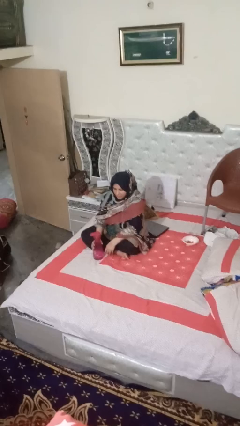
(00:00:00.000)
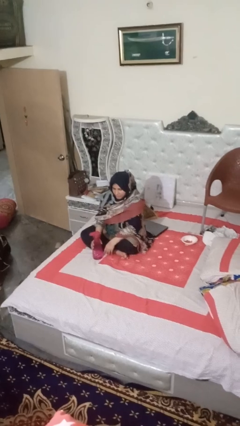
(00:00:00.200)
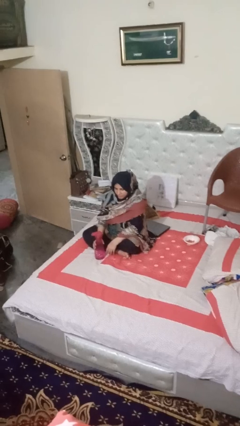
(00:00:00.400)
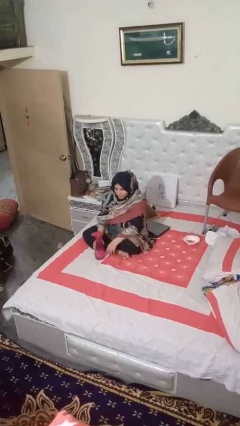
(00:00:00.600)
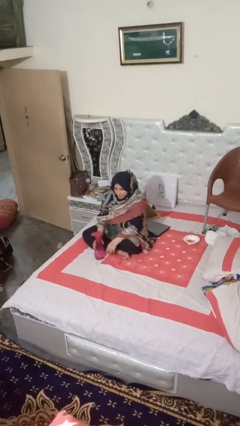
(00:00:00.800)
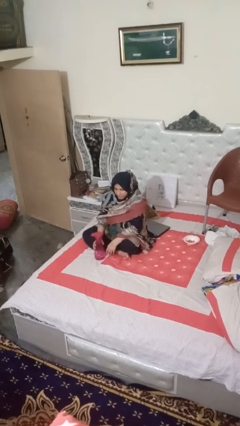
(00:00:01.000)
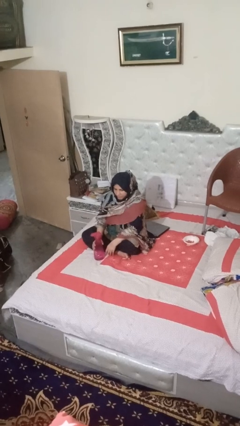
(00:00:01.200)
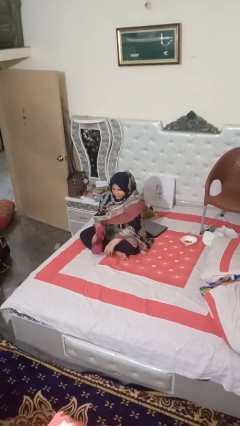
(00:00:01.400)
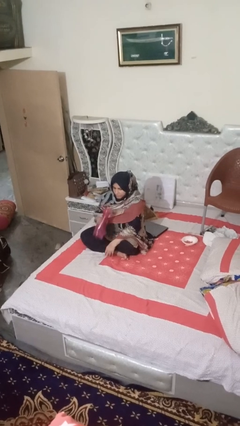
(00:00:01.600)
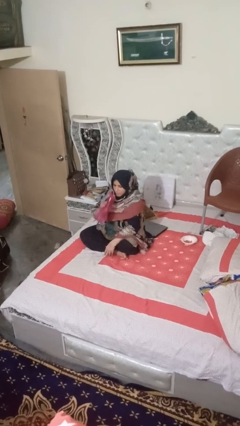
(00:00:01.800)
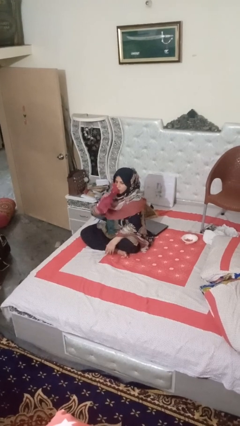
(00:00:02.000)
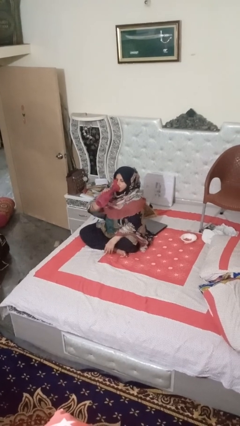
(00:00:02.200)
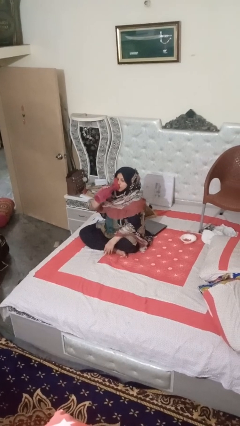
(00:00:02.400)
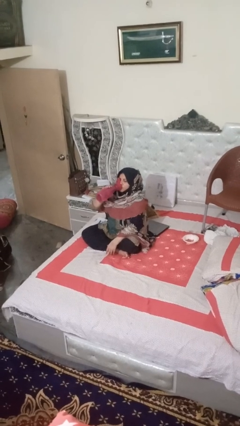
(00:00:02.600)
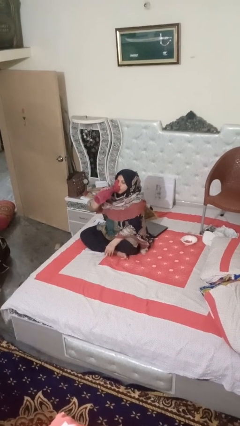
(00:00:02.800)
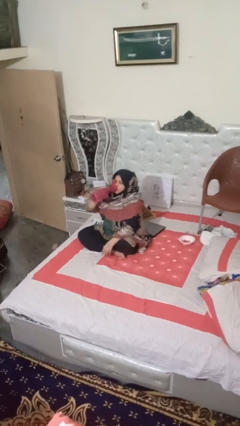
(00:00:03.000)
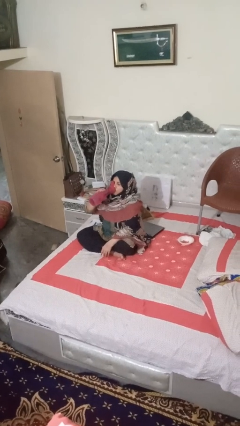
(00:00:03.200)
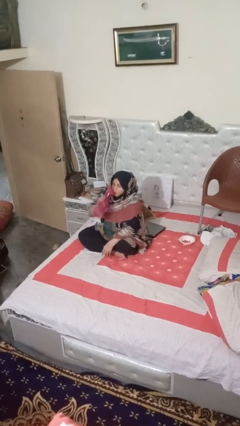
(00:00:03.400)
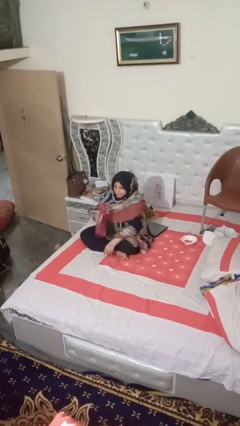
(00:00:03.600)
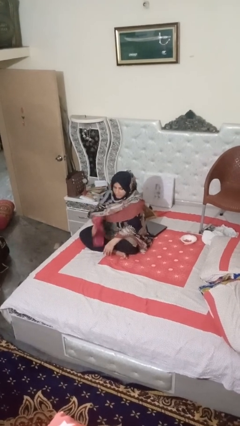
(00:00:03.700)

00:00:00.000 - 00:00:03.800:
person drinks from bottle

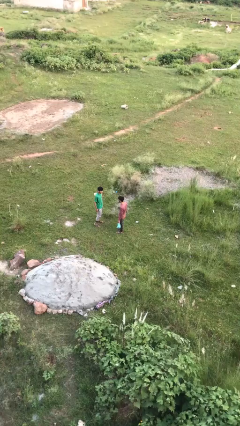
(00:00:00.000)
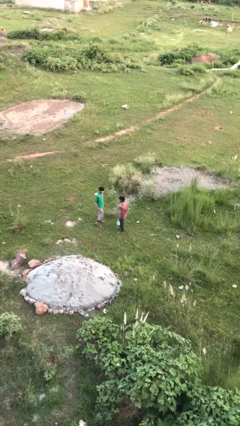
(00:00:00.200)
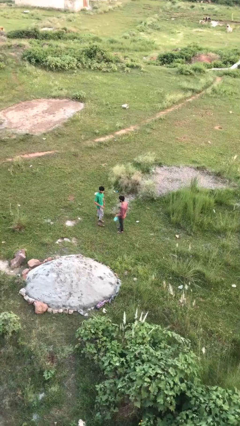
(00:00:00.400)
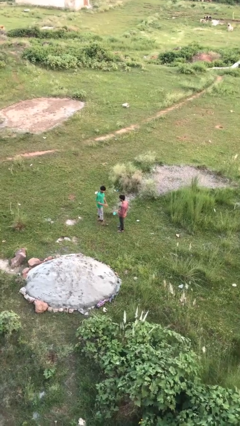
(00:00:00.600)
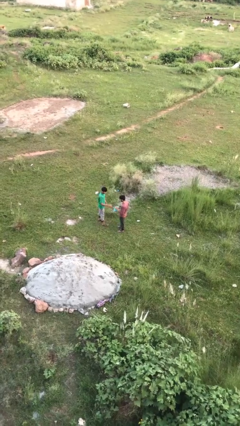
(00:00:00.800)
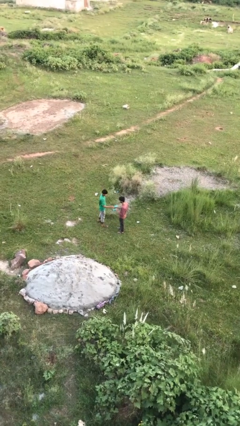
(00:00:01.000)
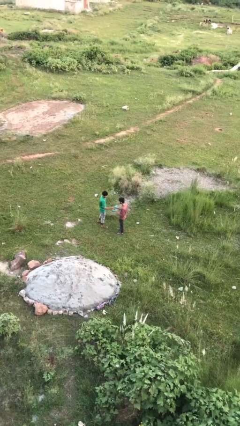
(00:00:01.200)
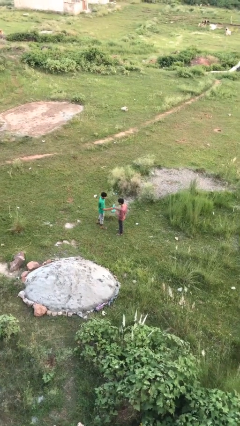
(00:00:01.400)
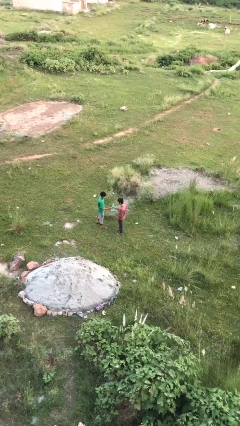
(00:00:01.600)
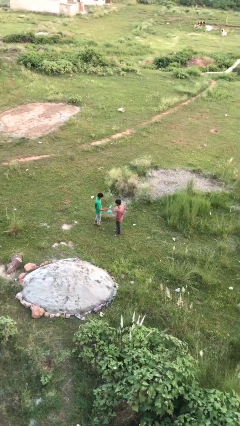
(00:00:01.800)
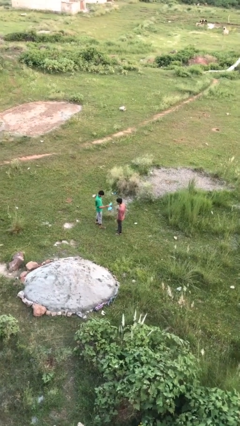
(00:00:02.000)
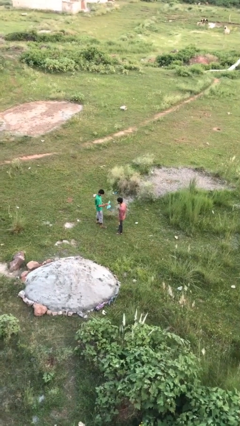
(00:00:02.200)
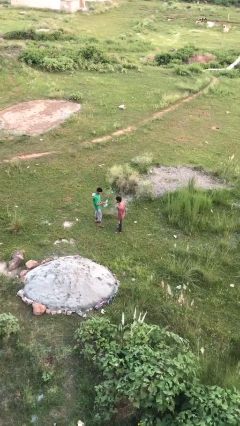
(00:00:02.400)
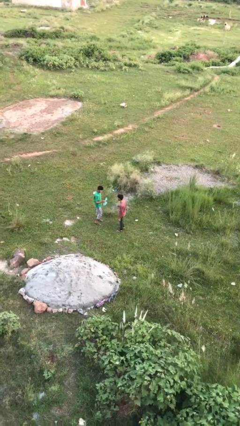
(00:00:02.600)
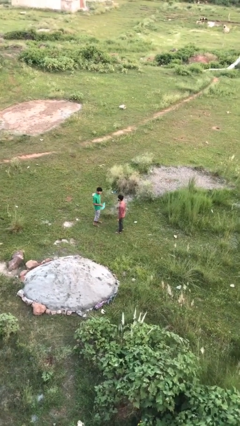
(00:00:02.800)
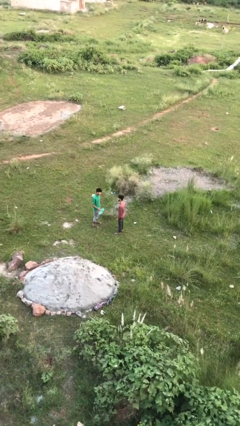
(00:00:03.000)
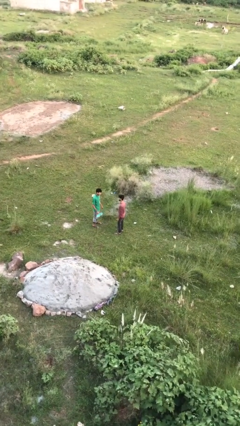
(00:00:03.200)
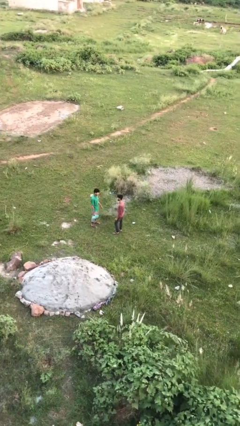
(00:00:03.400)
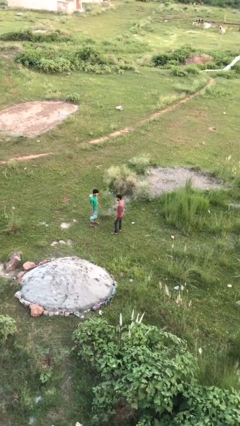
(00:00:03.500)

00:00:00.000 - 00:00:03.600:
person transfers object to person

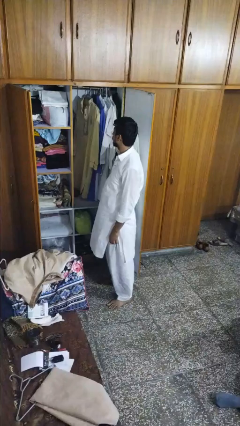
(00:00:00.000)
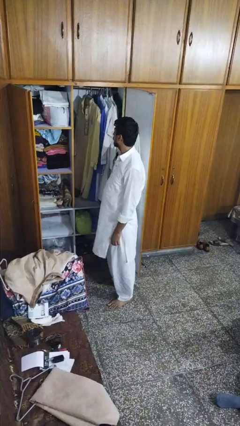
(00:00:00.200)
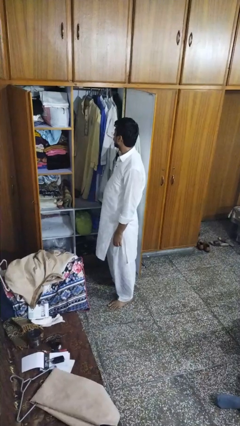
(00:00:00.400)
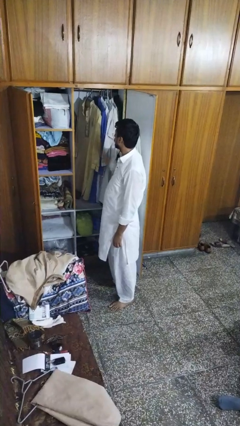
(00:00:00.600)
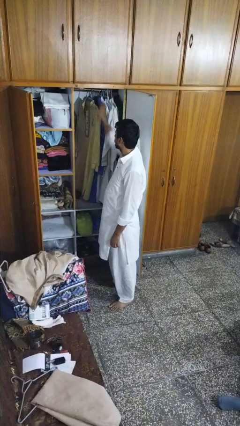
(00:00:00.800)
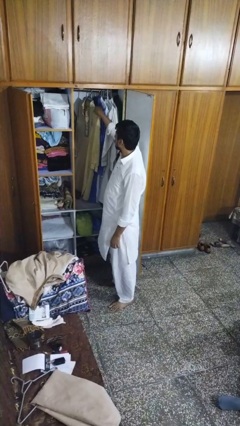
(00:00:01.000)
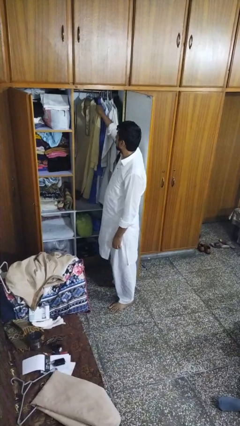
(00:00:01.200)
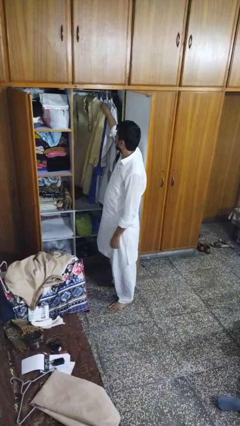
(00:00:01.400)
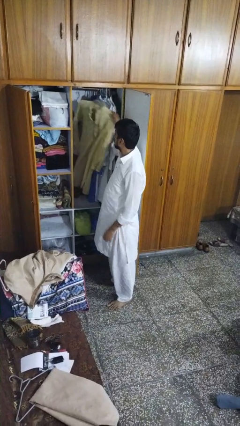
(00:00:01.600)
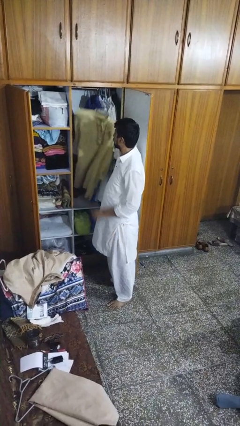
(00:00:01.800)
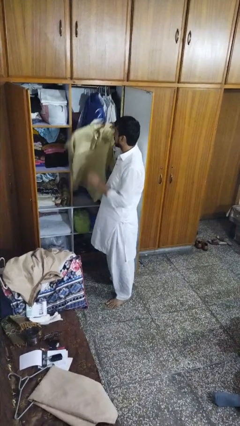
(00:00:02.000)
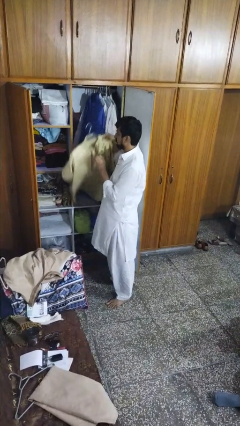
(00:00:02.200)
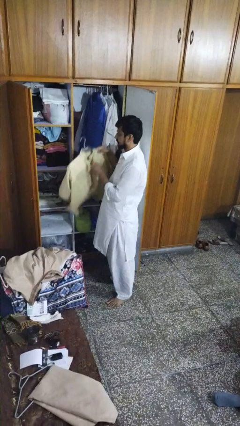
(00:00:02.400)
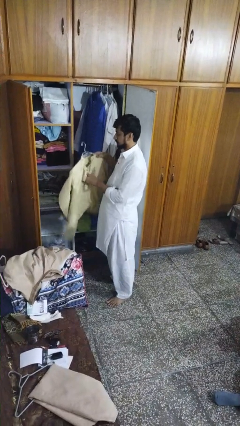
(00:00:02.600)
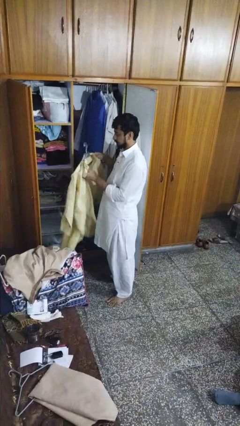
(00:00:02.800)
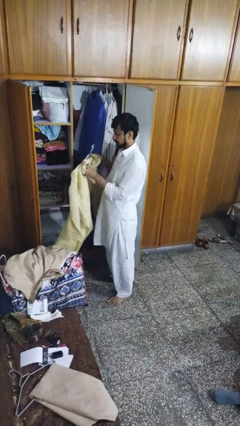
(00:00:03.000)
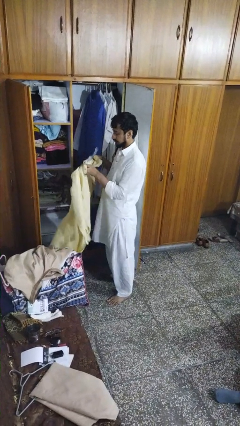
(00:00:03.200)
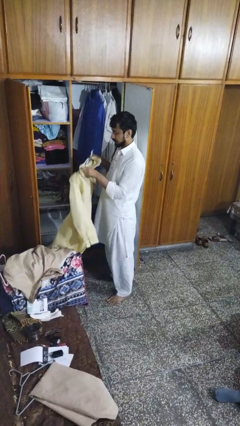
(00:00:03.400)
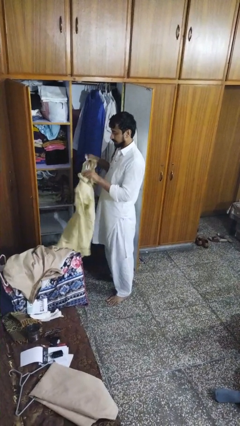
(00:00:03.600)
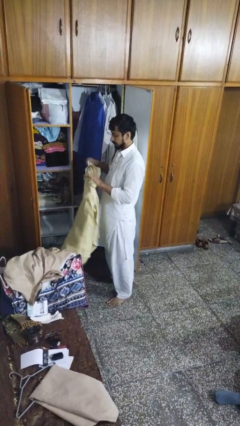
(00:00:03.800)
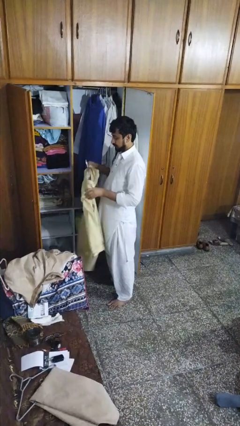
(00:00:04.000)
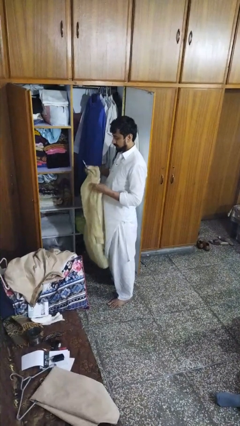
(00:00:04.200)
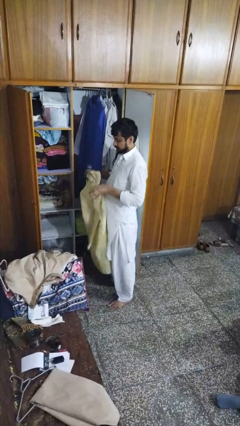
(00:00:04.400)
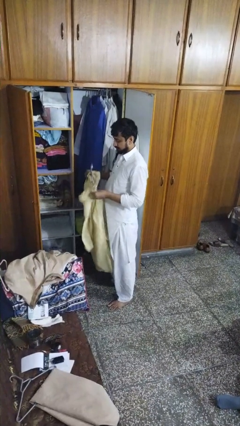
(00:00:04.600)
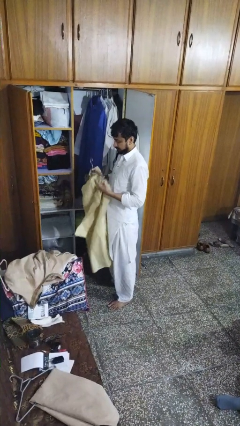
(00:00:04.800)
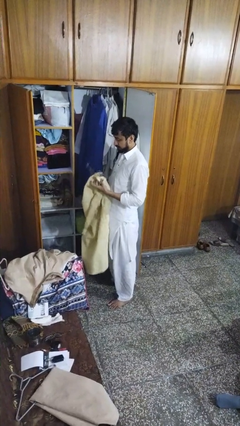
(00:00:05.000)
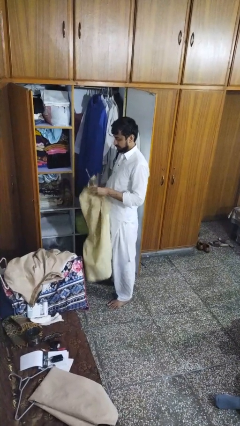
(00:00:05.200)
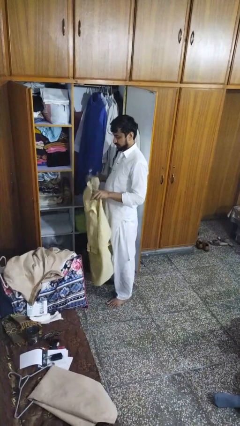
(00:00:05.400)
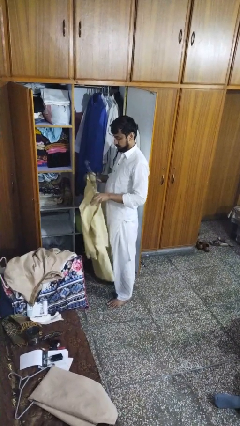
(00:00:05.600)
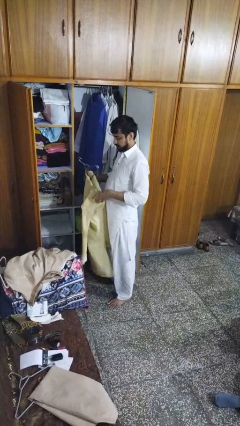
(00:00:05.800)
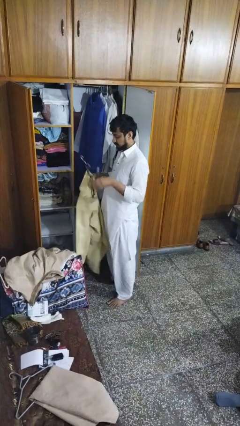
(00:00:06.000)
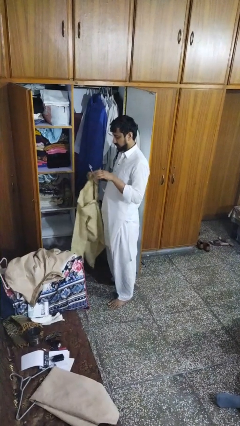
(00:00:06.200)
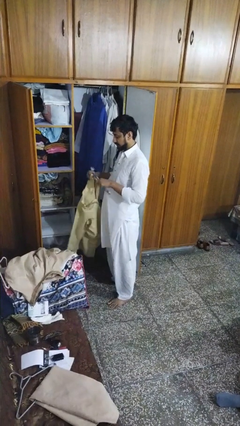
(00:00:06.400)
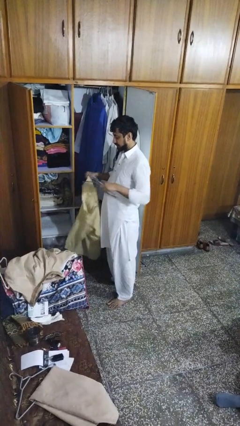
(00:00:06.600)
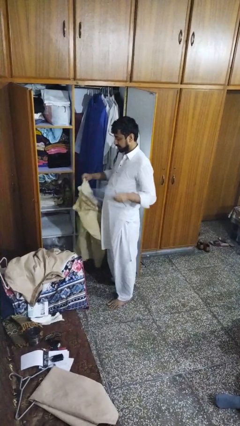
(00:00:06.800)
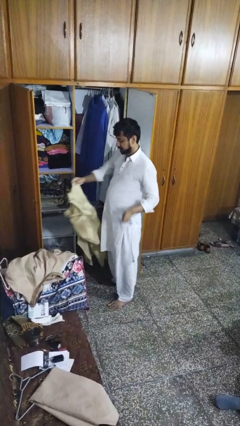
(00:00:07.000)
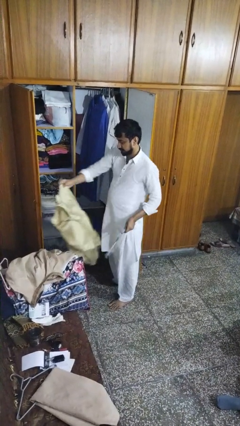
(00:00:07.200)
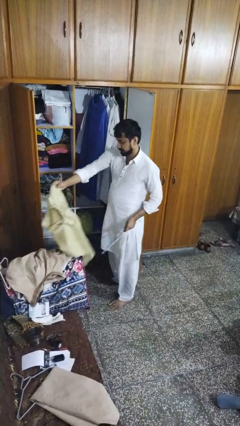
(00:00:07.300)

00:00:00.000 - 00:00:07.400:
person takes clothes from closet

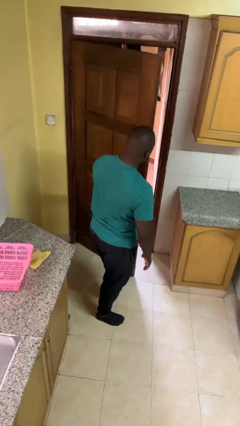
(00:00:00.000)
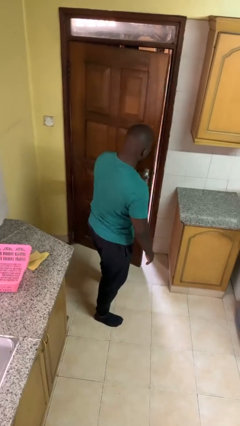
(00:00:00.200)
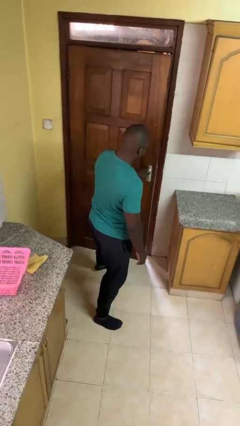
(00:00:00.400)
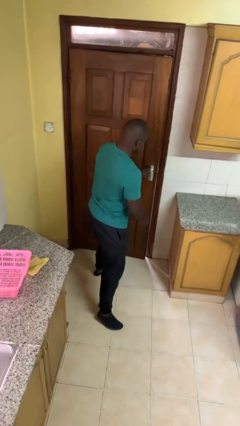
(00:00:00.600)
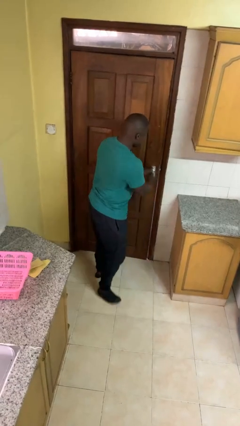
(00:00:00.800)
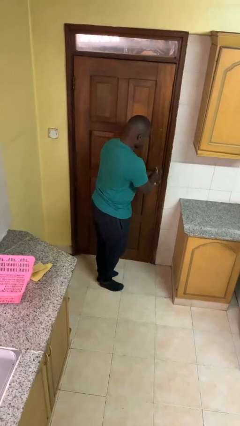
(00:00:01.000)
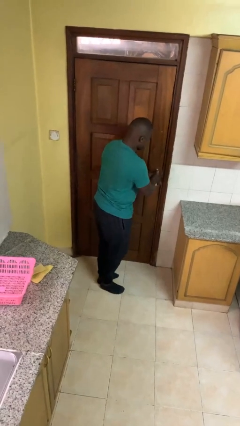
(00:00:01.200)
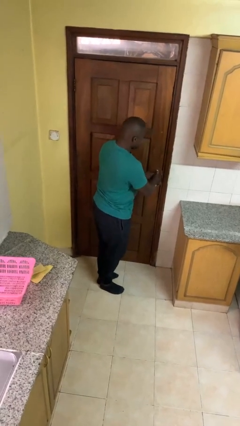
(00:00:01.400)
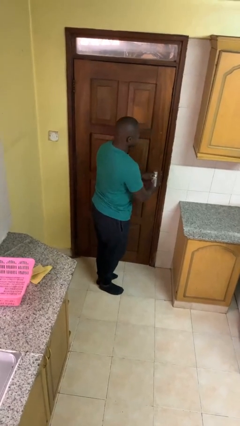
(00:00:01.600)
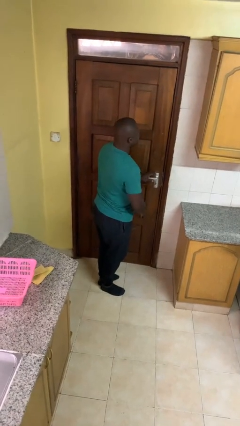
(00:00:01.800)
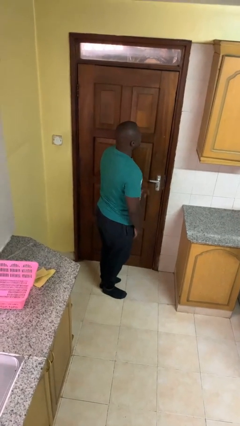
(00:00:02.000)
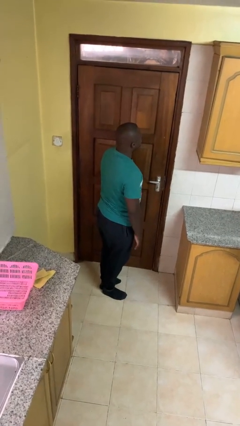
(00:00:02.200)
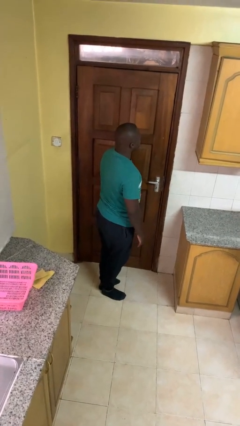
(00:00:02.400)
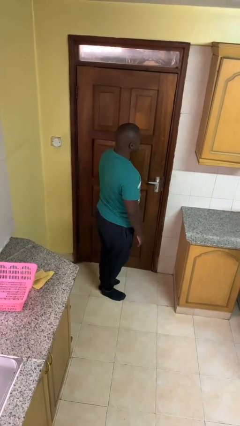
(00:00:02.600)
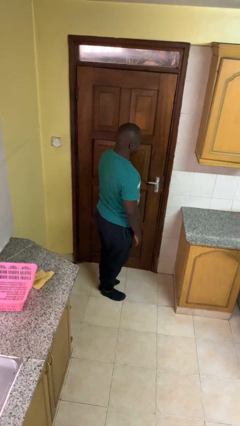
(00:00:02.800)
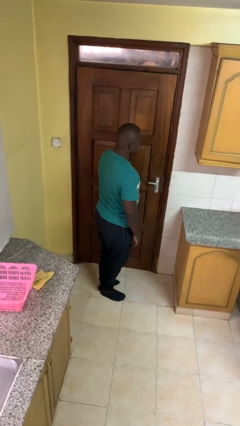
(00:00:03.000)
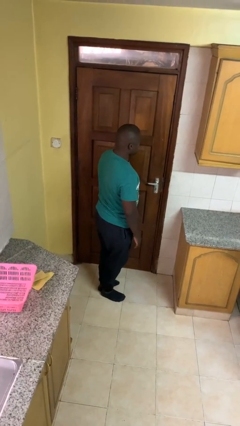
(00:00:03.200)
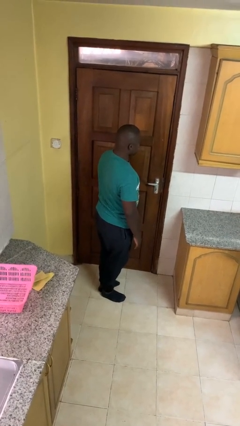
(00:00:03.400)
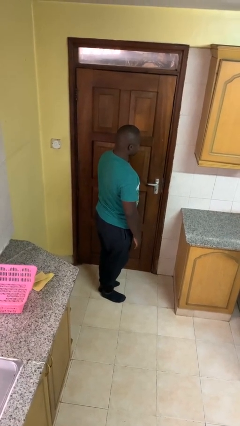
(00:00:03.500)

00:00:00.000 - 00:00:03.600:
person closes facility door
